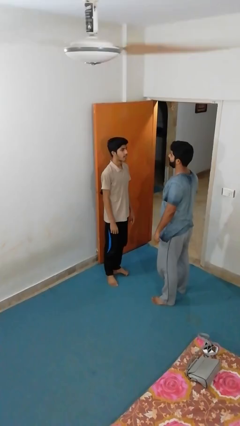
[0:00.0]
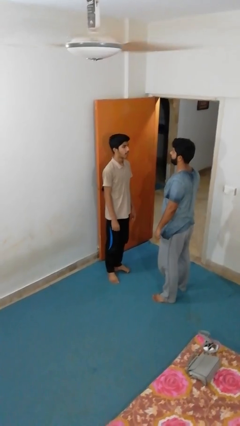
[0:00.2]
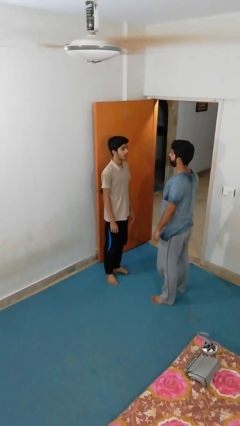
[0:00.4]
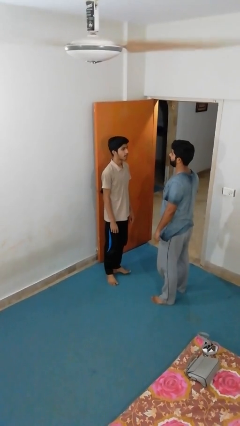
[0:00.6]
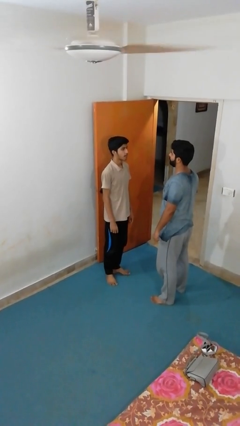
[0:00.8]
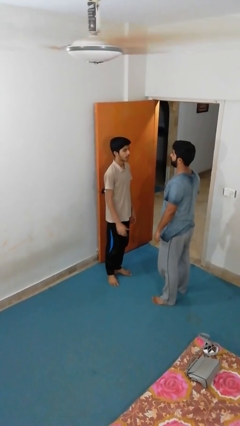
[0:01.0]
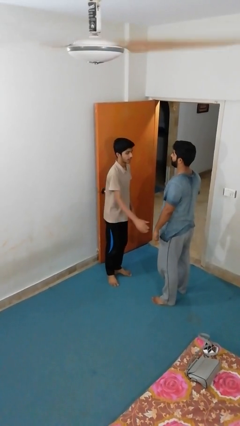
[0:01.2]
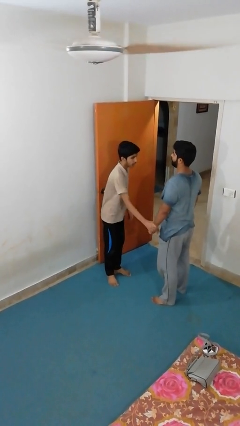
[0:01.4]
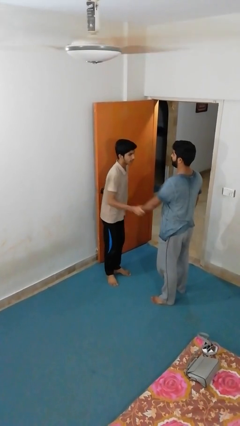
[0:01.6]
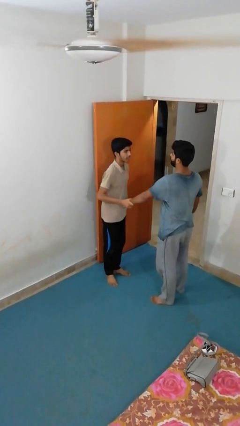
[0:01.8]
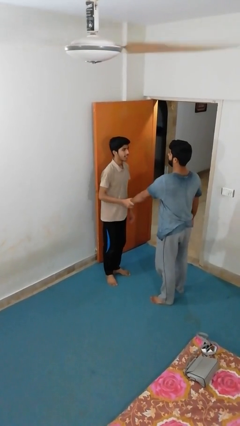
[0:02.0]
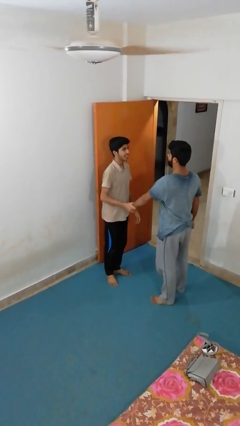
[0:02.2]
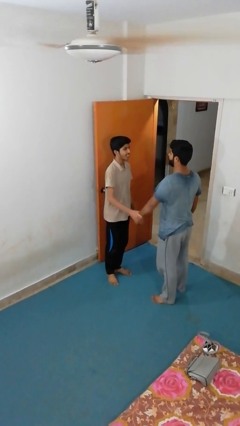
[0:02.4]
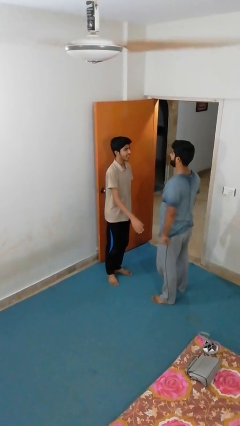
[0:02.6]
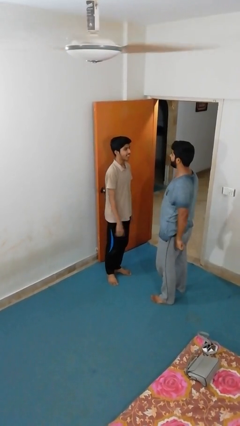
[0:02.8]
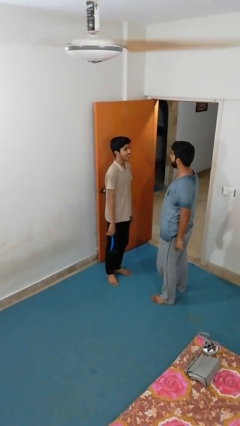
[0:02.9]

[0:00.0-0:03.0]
person grabs person by forearm

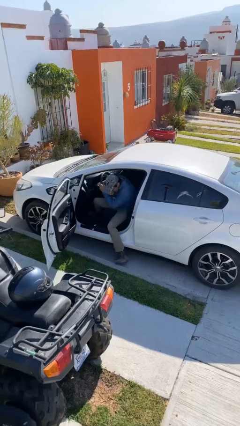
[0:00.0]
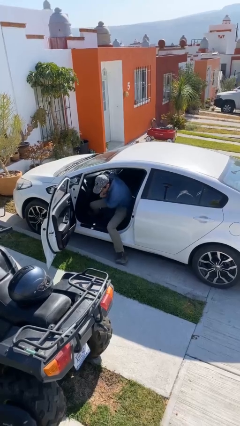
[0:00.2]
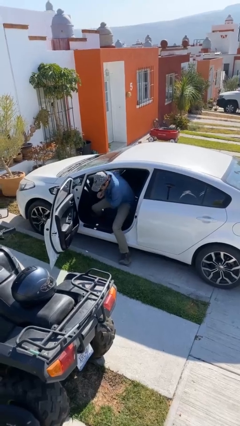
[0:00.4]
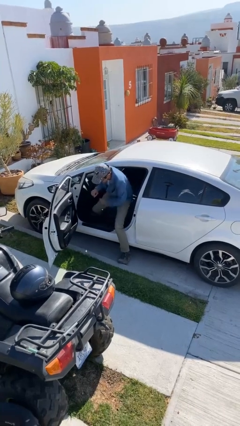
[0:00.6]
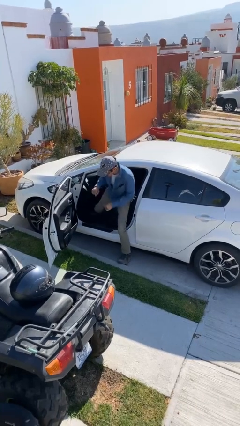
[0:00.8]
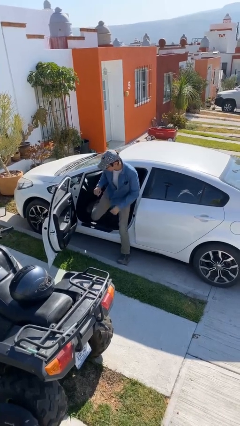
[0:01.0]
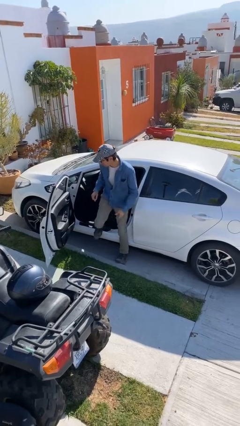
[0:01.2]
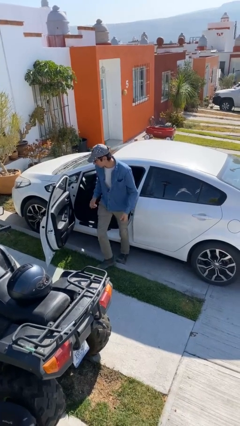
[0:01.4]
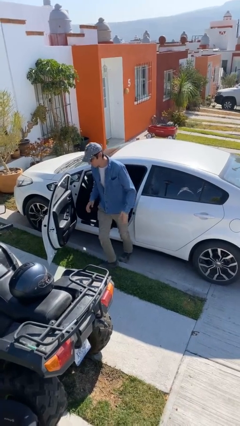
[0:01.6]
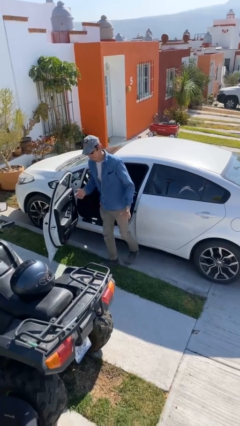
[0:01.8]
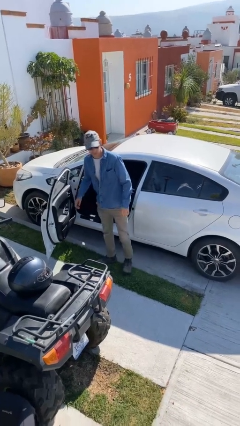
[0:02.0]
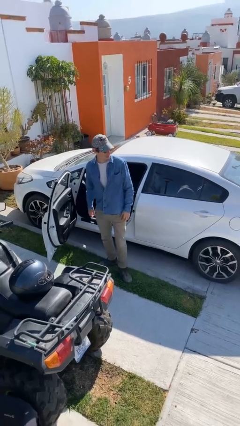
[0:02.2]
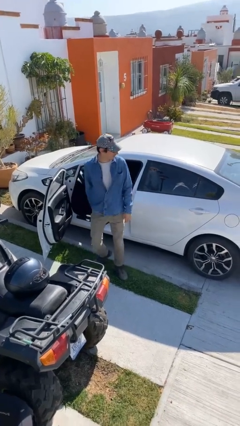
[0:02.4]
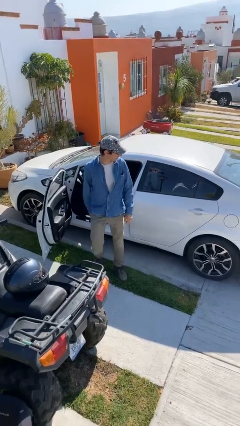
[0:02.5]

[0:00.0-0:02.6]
person exits car

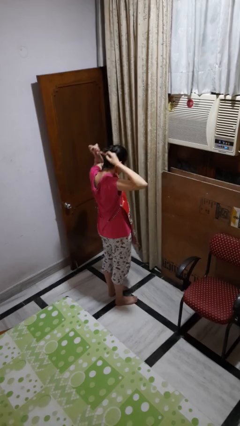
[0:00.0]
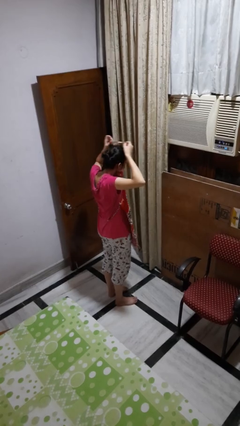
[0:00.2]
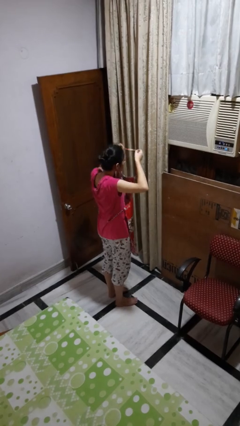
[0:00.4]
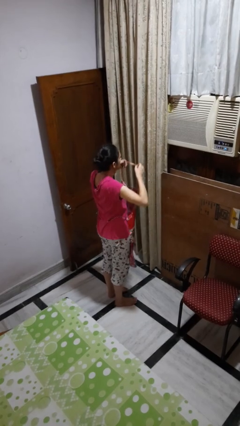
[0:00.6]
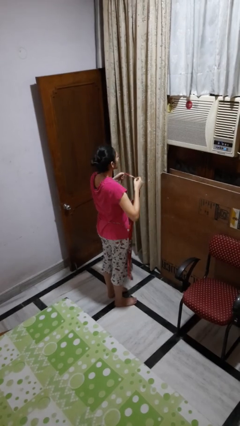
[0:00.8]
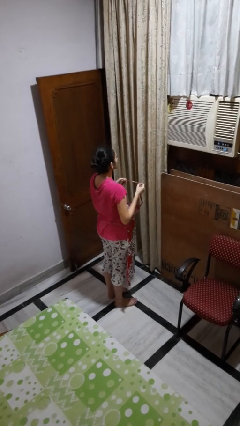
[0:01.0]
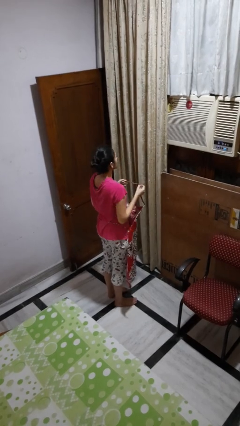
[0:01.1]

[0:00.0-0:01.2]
person takes off apron

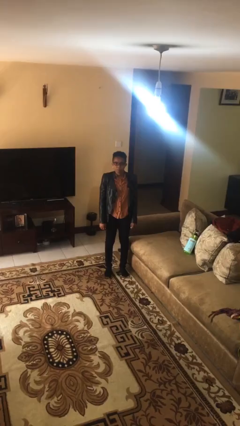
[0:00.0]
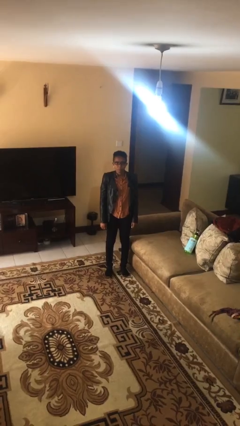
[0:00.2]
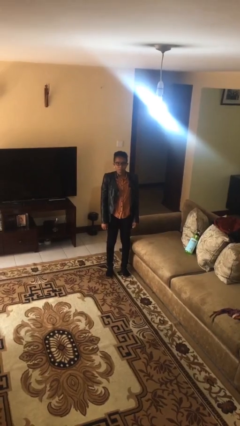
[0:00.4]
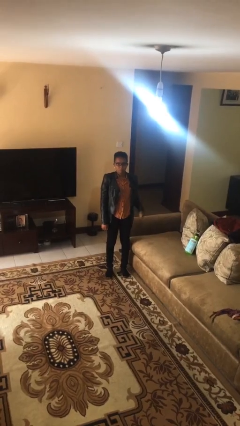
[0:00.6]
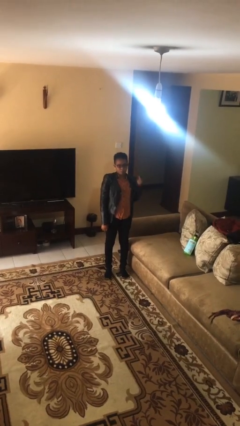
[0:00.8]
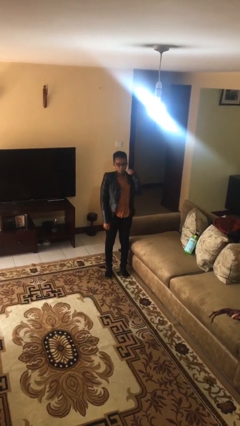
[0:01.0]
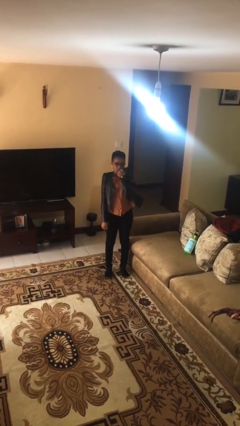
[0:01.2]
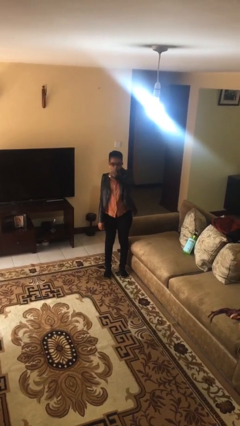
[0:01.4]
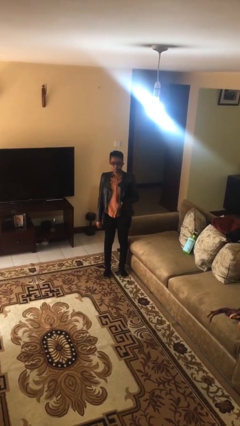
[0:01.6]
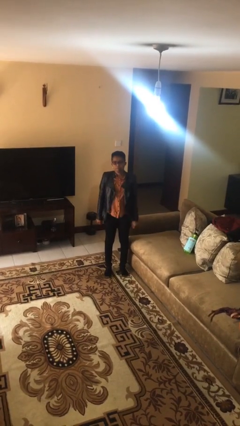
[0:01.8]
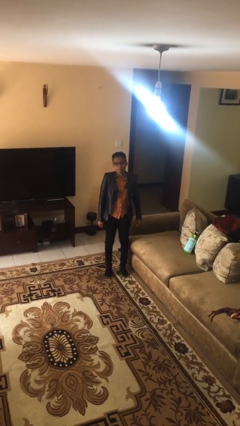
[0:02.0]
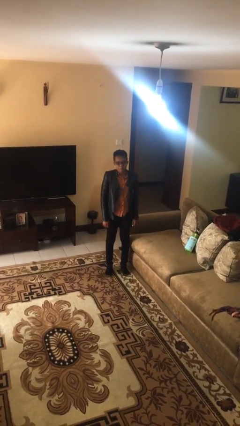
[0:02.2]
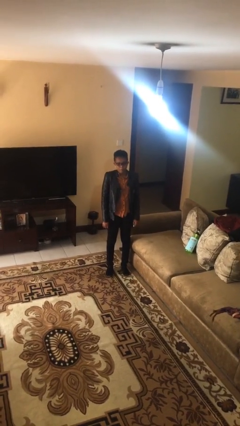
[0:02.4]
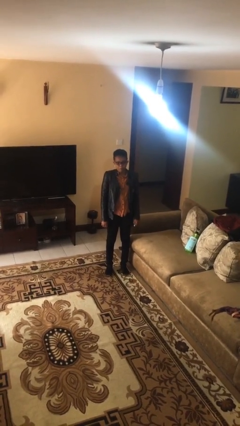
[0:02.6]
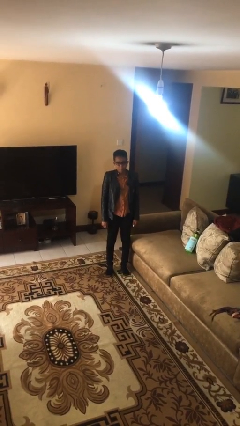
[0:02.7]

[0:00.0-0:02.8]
person punches

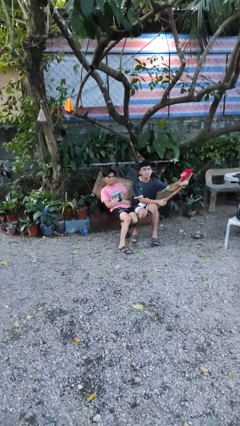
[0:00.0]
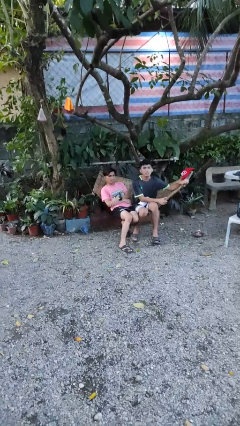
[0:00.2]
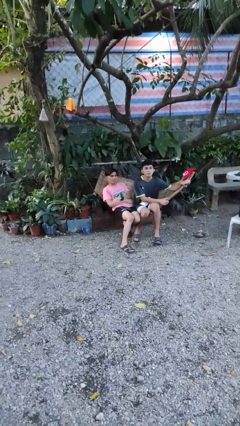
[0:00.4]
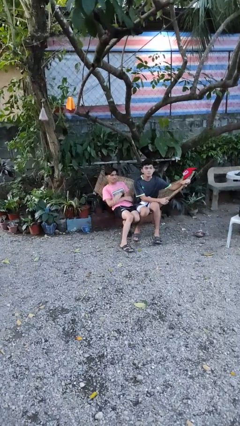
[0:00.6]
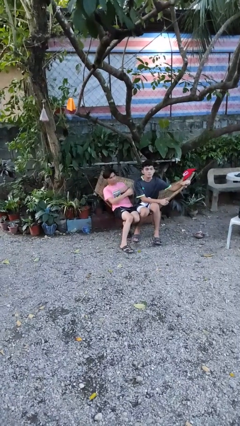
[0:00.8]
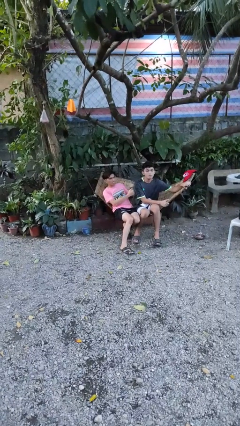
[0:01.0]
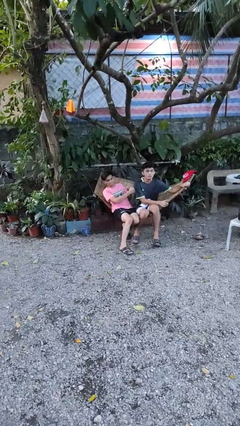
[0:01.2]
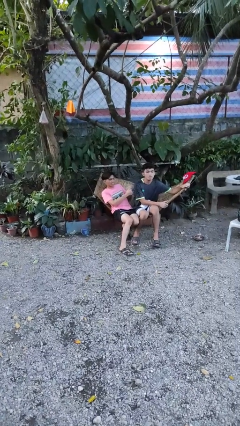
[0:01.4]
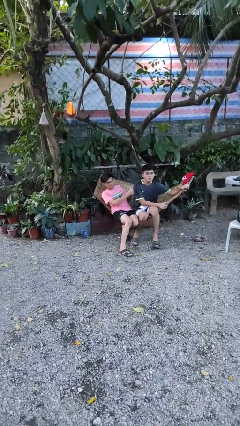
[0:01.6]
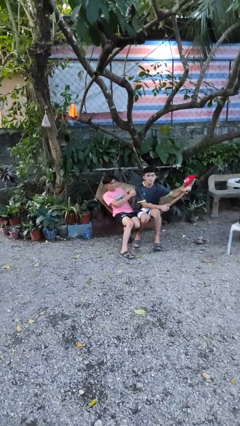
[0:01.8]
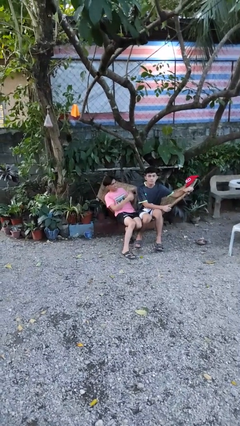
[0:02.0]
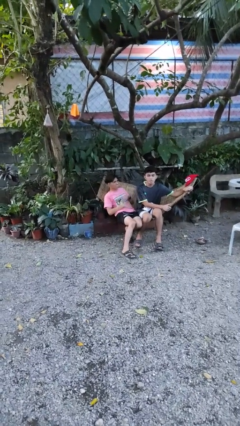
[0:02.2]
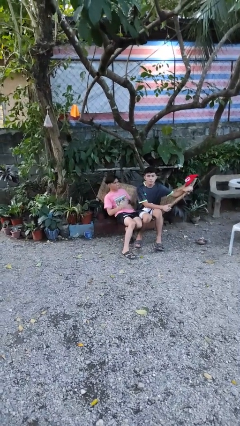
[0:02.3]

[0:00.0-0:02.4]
person pounds shoulders of person

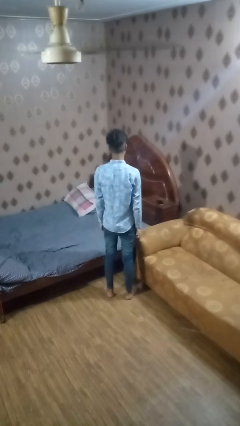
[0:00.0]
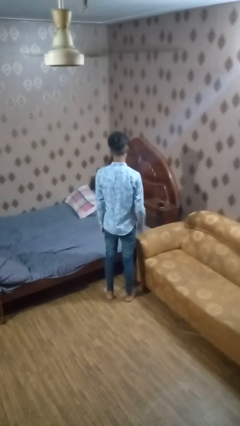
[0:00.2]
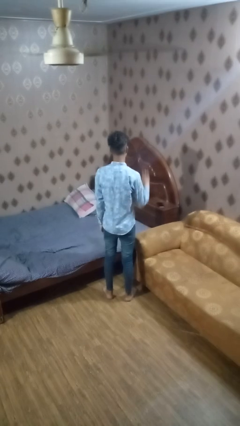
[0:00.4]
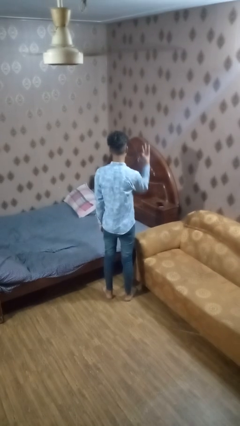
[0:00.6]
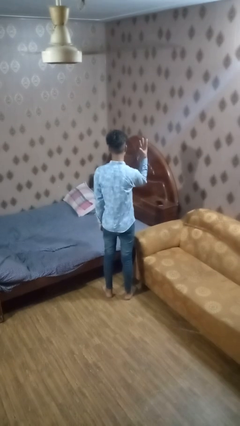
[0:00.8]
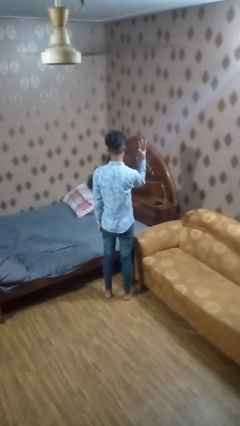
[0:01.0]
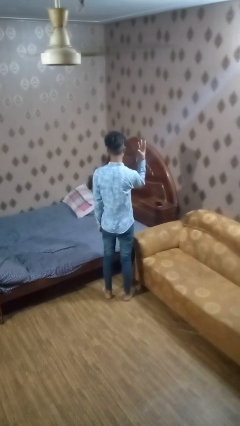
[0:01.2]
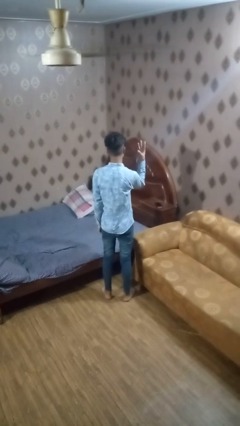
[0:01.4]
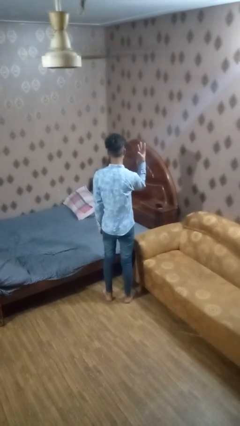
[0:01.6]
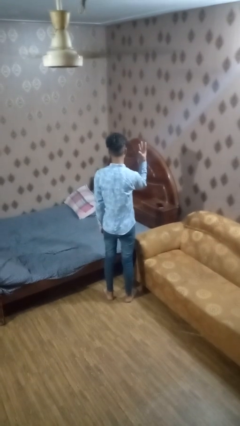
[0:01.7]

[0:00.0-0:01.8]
person gestures number three

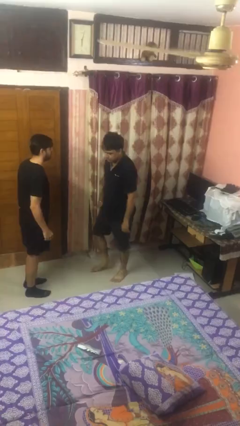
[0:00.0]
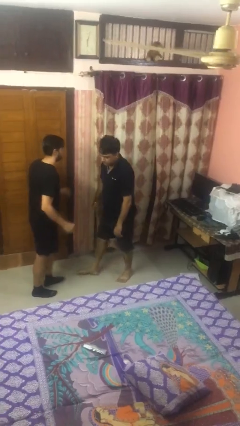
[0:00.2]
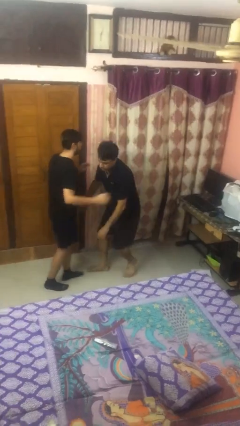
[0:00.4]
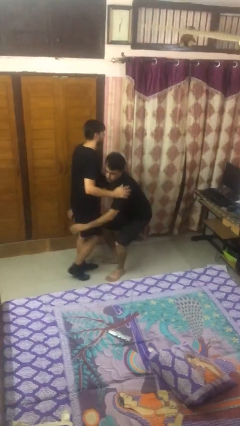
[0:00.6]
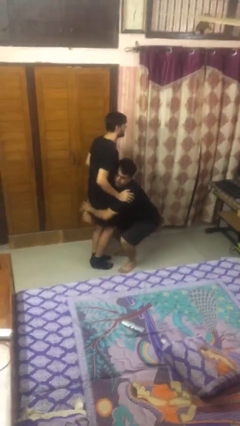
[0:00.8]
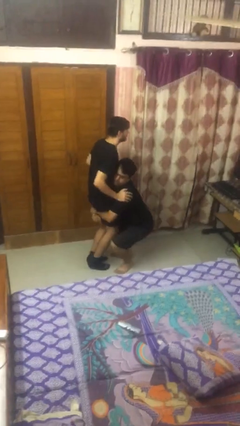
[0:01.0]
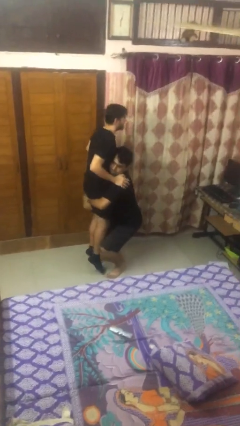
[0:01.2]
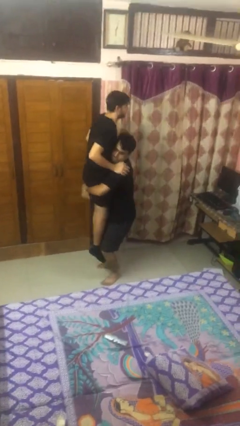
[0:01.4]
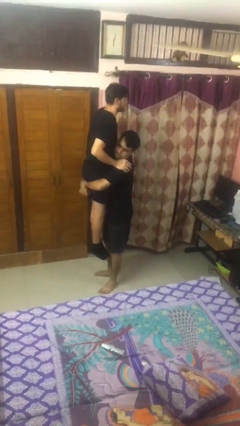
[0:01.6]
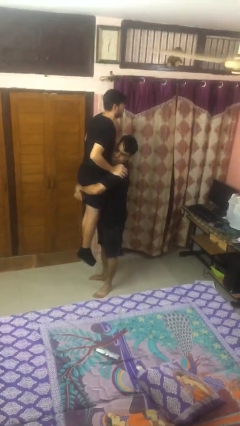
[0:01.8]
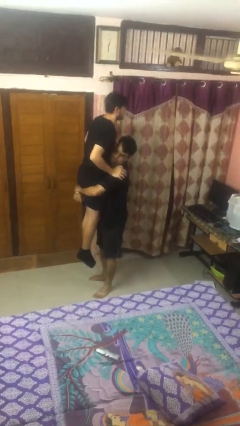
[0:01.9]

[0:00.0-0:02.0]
person picks up person

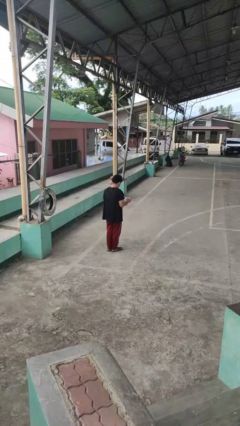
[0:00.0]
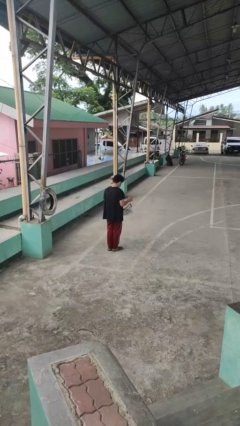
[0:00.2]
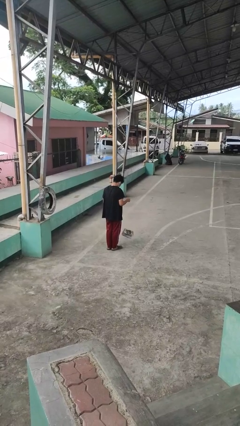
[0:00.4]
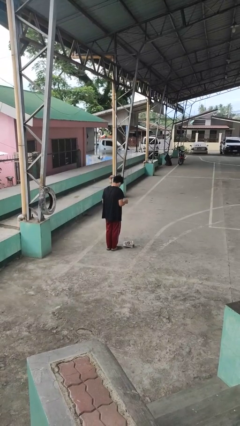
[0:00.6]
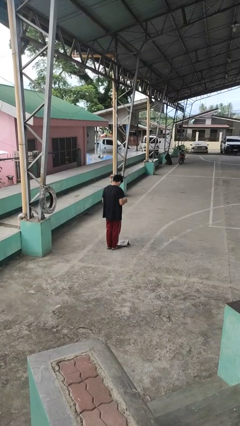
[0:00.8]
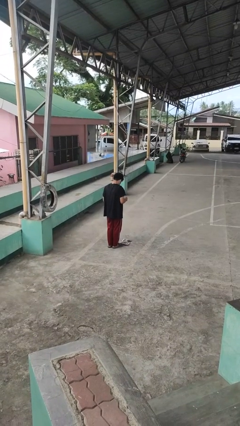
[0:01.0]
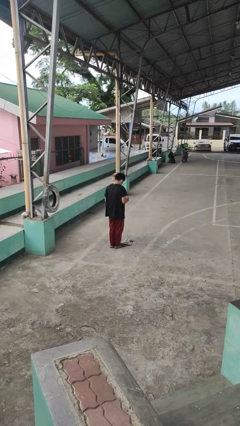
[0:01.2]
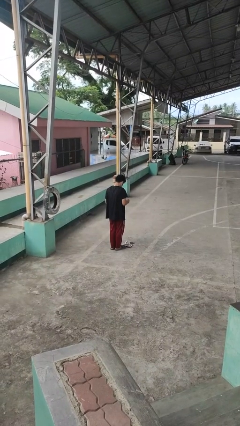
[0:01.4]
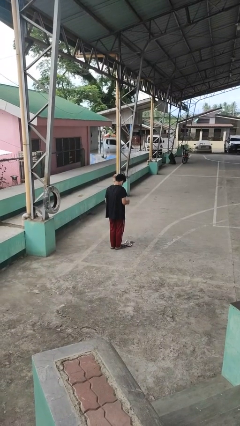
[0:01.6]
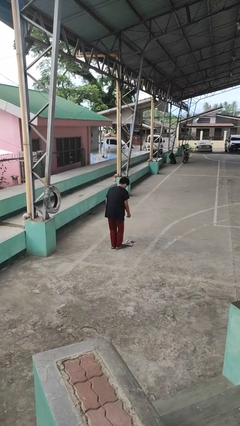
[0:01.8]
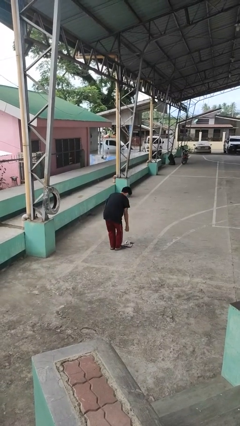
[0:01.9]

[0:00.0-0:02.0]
person drops object
